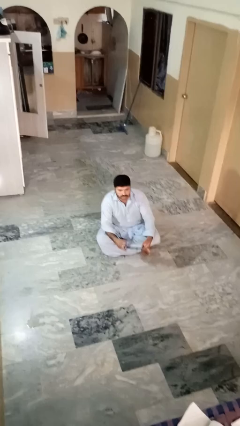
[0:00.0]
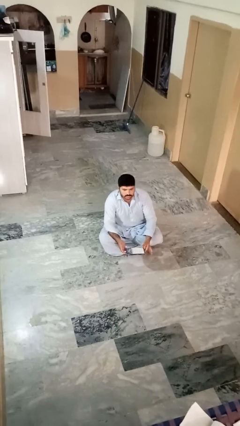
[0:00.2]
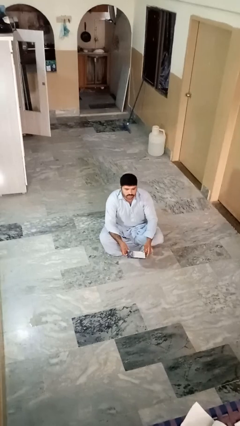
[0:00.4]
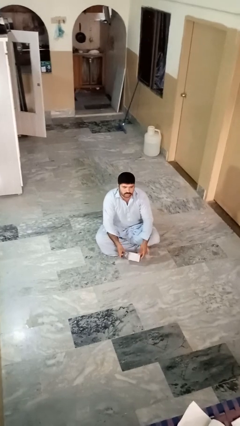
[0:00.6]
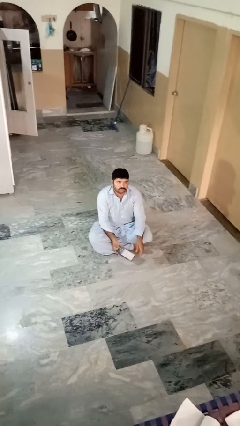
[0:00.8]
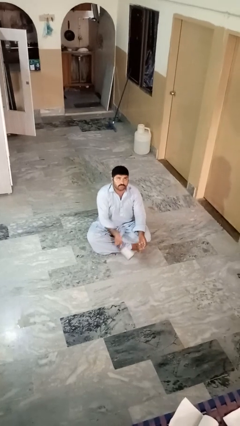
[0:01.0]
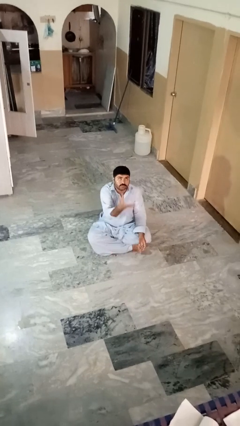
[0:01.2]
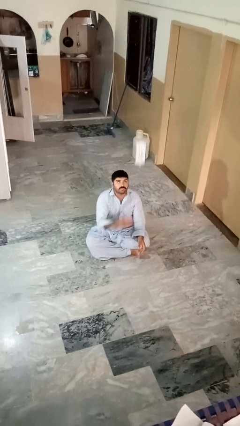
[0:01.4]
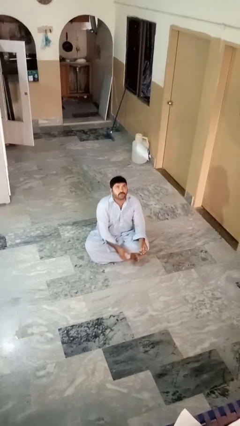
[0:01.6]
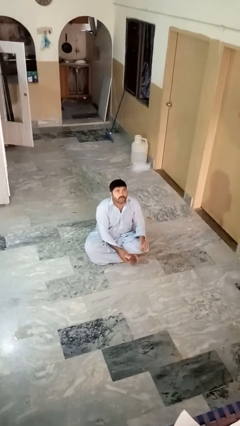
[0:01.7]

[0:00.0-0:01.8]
person drops object

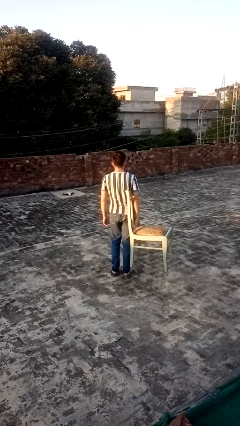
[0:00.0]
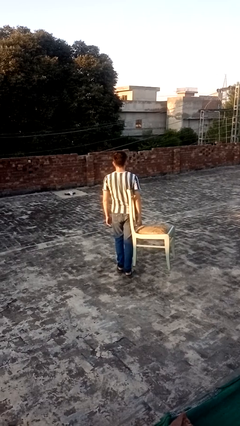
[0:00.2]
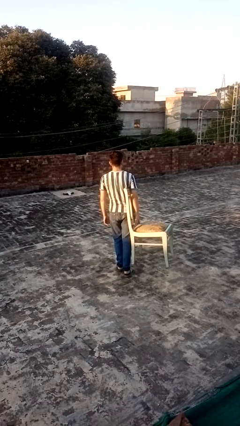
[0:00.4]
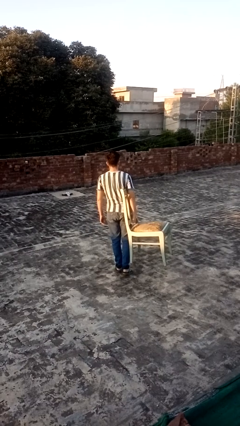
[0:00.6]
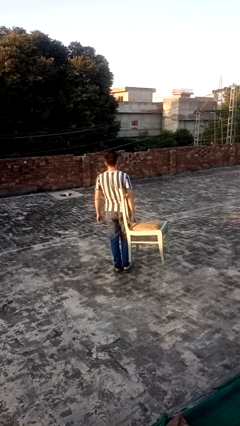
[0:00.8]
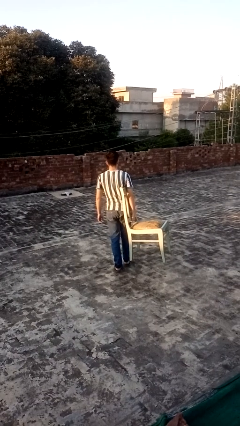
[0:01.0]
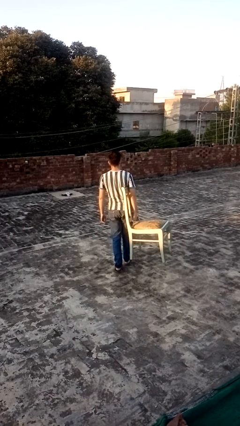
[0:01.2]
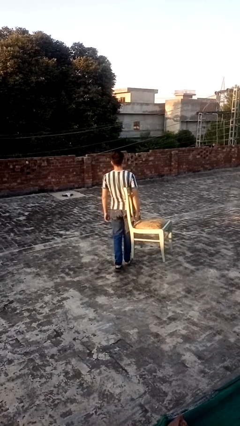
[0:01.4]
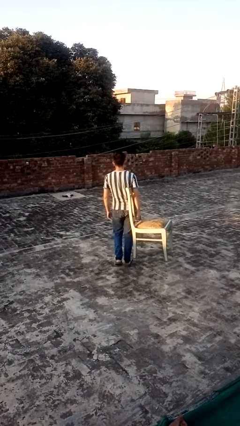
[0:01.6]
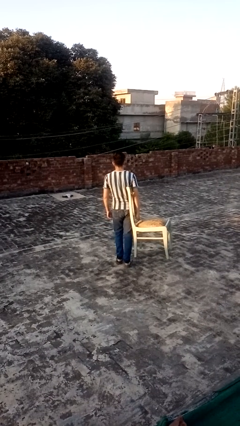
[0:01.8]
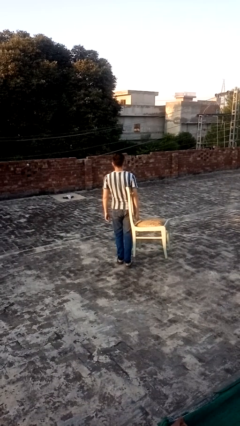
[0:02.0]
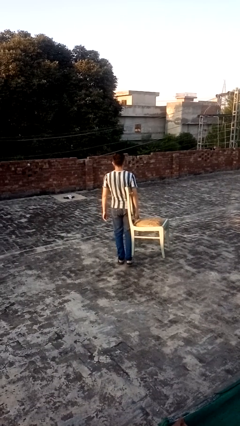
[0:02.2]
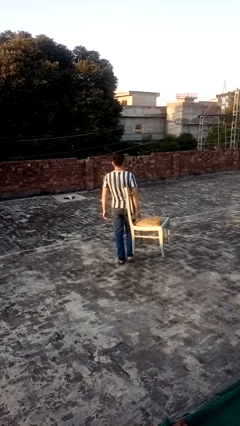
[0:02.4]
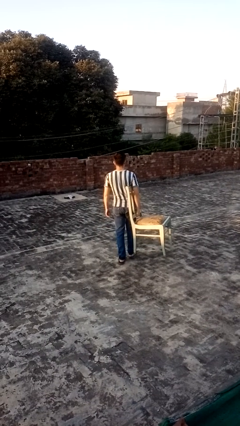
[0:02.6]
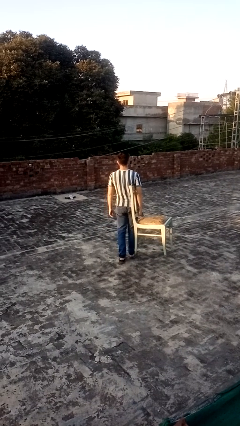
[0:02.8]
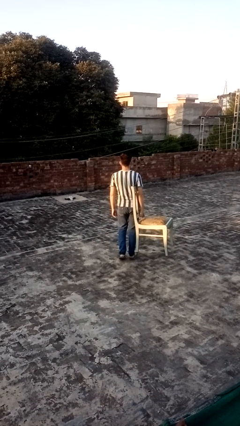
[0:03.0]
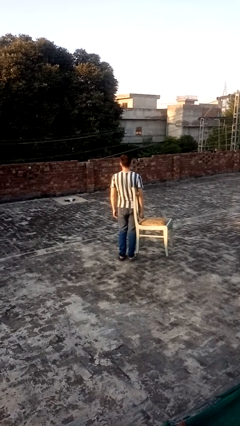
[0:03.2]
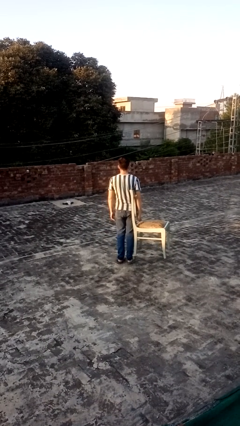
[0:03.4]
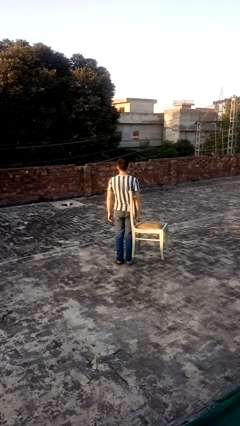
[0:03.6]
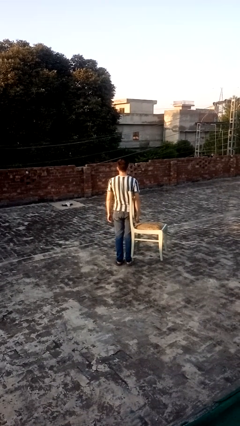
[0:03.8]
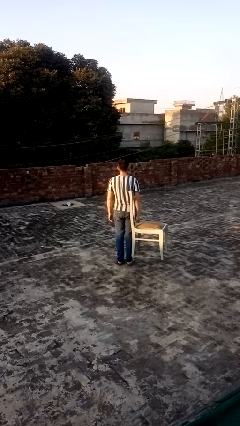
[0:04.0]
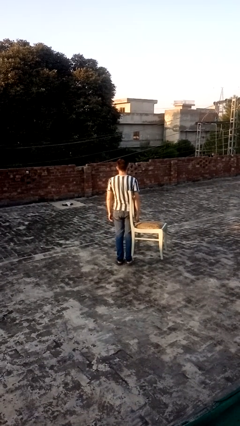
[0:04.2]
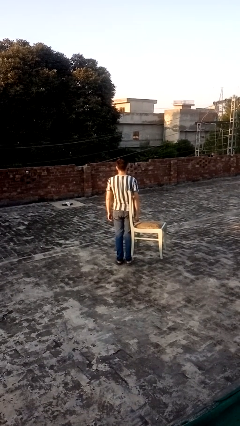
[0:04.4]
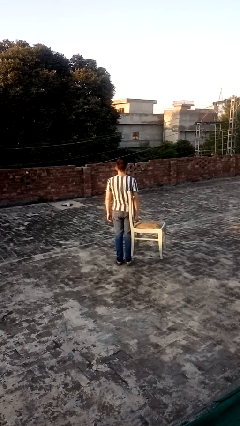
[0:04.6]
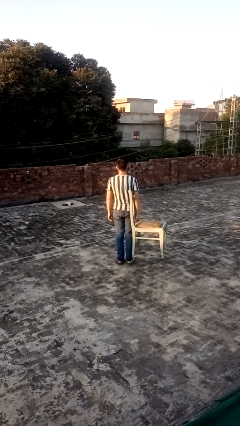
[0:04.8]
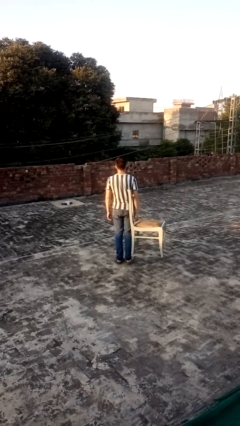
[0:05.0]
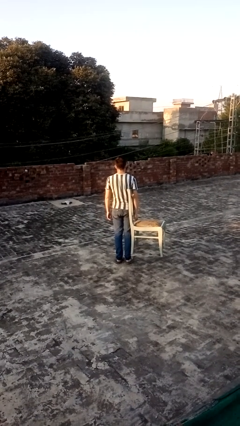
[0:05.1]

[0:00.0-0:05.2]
person carries furniture

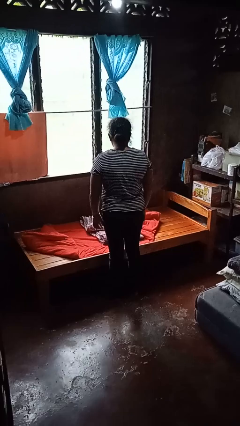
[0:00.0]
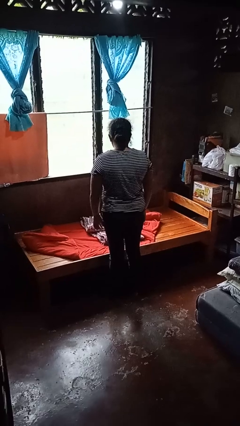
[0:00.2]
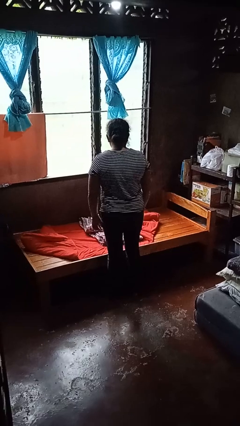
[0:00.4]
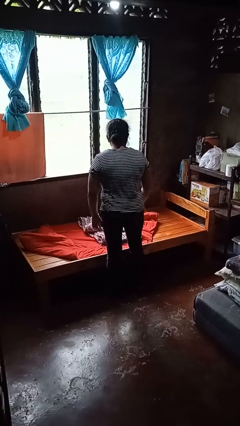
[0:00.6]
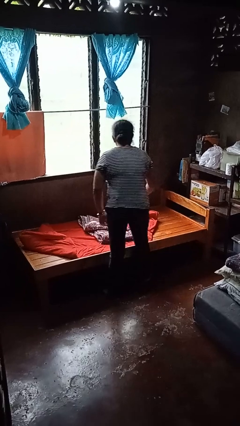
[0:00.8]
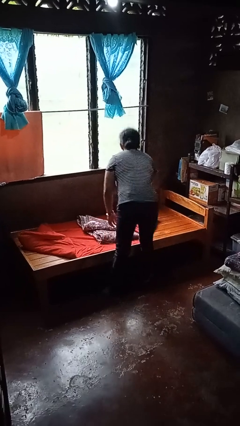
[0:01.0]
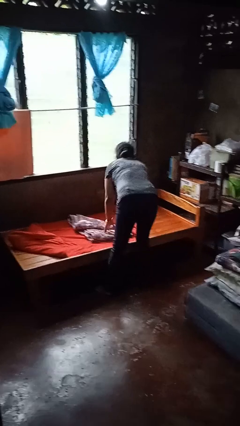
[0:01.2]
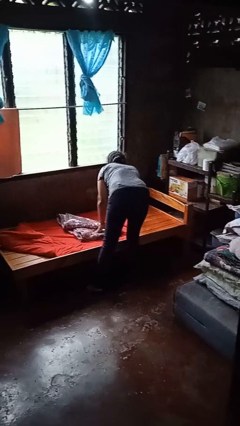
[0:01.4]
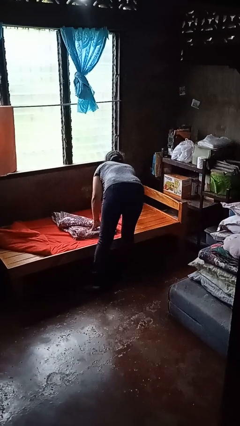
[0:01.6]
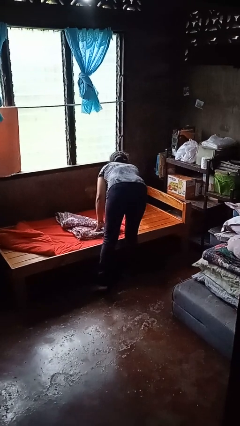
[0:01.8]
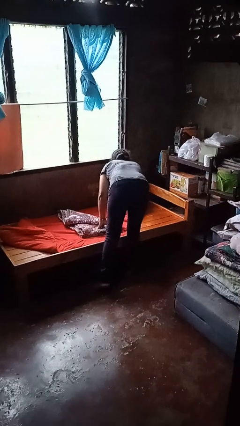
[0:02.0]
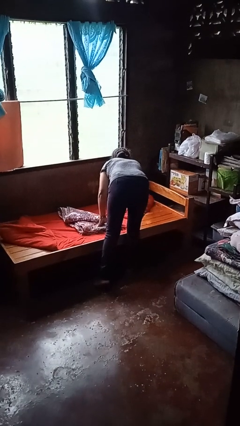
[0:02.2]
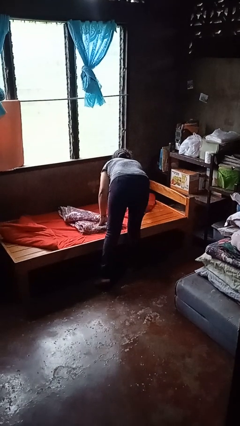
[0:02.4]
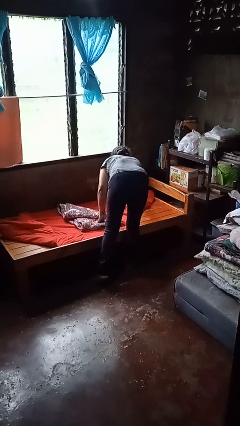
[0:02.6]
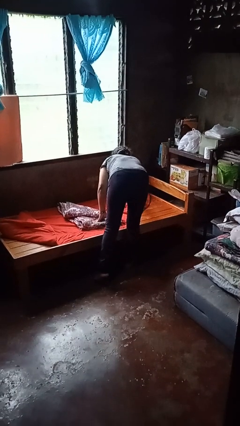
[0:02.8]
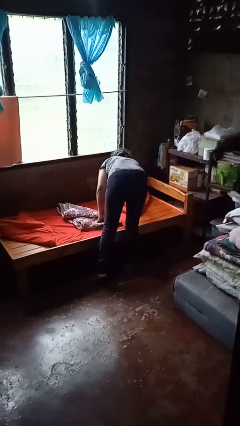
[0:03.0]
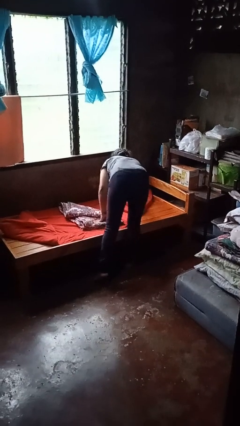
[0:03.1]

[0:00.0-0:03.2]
person makes bed

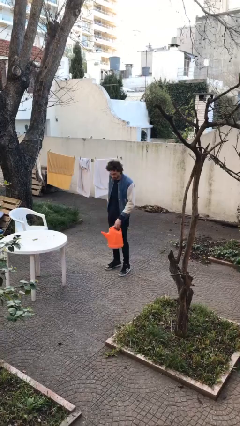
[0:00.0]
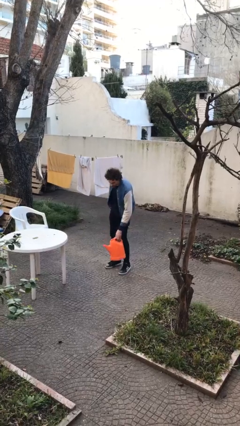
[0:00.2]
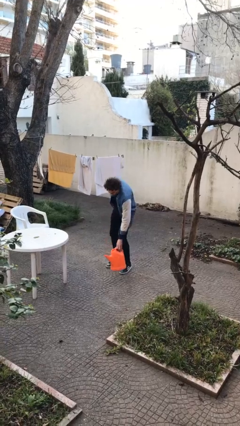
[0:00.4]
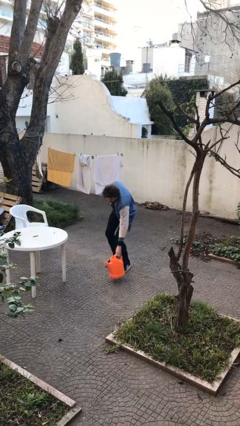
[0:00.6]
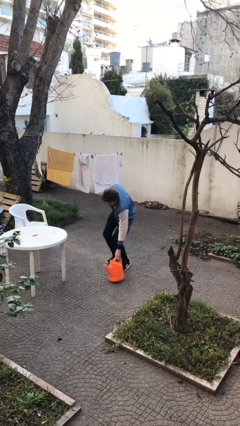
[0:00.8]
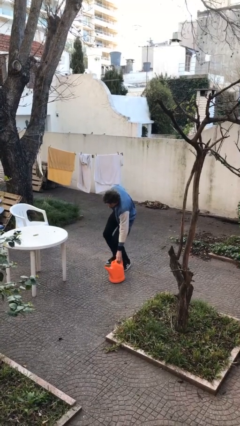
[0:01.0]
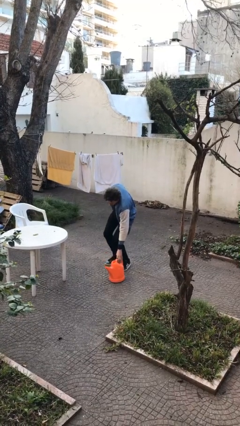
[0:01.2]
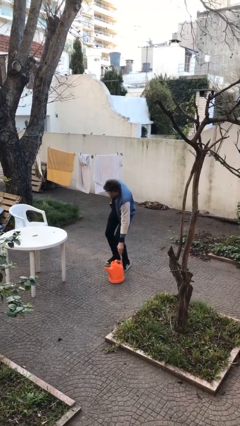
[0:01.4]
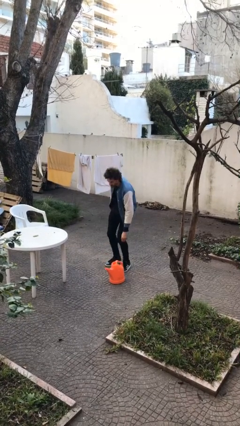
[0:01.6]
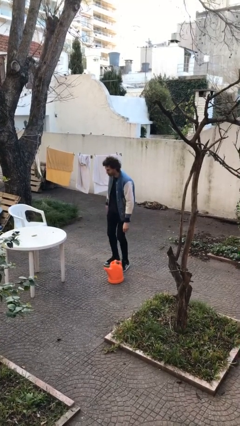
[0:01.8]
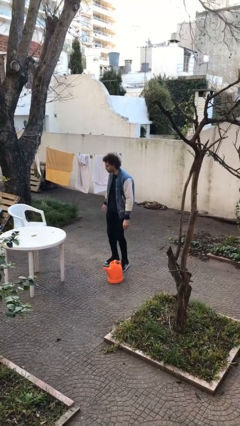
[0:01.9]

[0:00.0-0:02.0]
person puts down object on floor

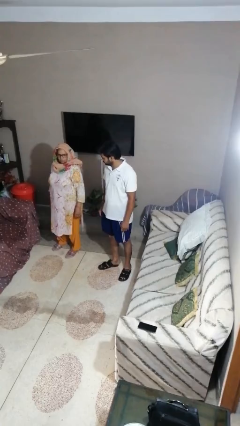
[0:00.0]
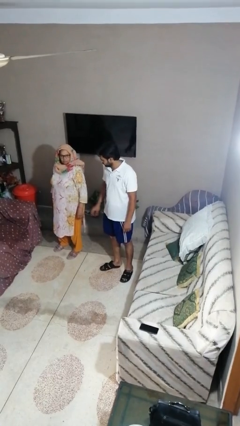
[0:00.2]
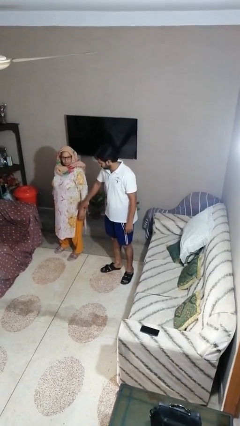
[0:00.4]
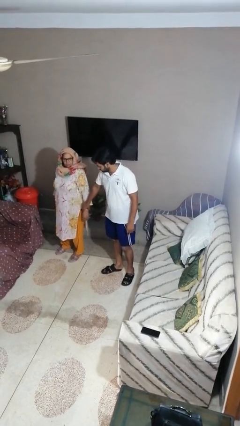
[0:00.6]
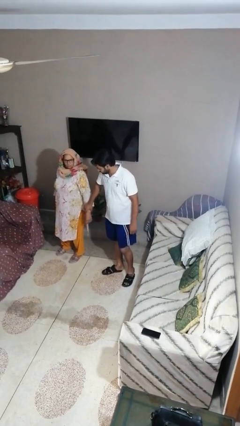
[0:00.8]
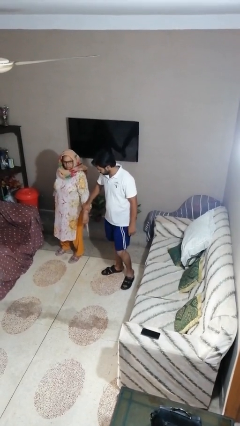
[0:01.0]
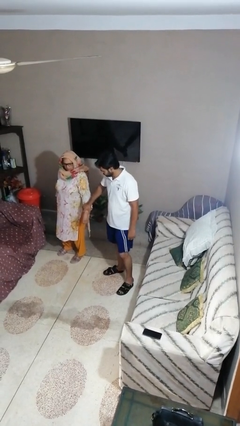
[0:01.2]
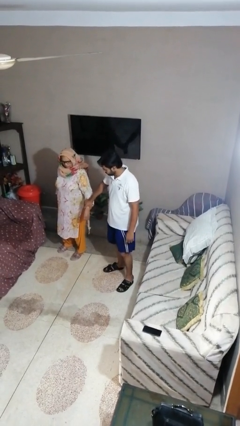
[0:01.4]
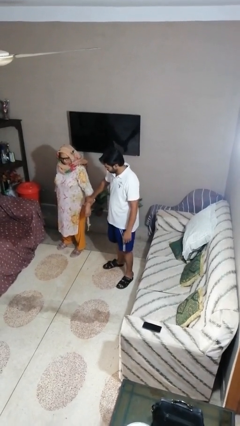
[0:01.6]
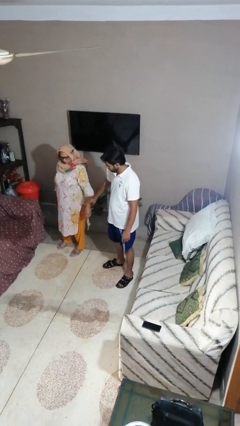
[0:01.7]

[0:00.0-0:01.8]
person grabs person by forearm

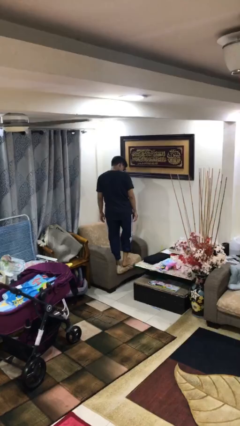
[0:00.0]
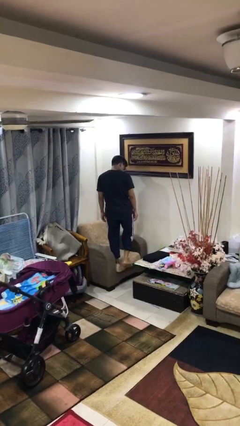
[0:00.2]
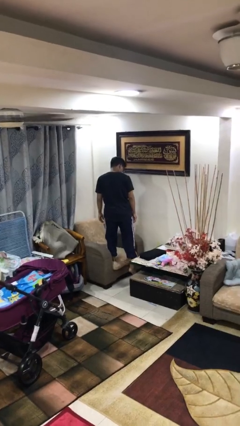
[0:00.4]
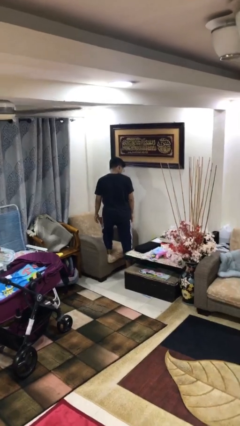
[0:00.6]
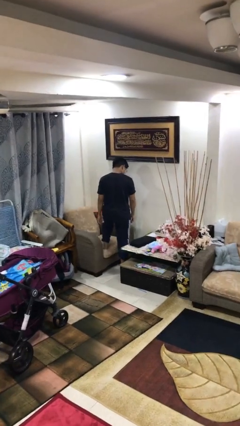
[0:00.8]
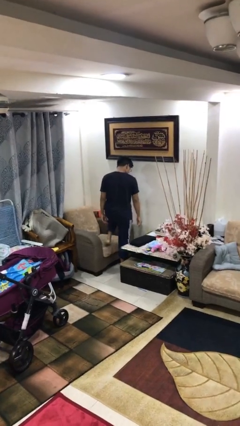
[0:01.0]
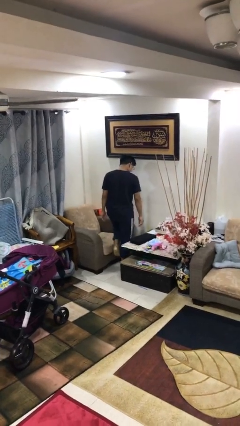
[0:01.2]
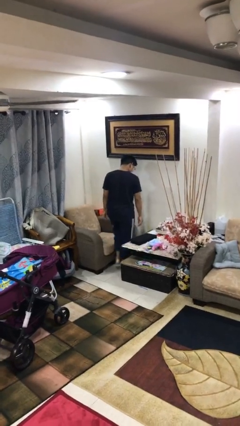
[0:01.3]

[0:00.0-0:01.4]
person climbs off couch

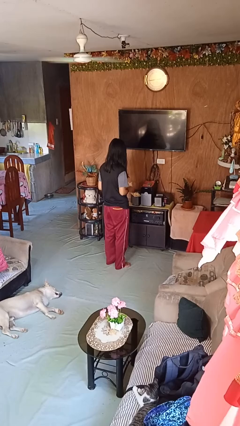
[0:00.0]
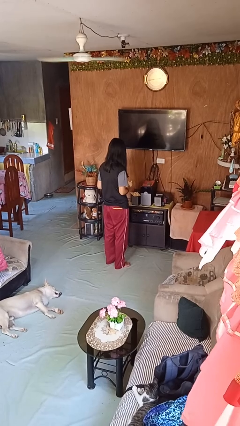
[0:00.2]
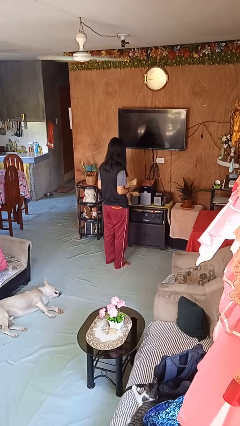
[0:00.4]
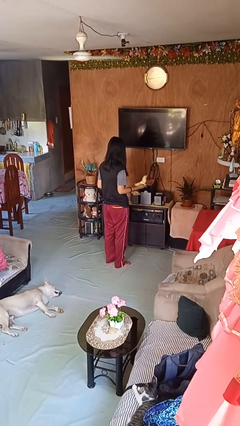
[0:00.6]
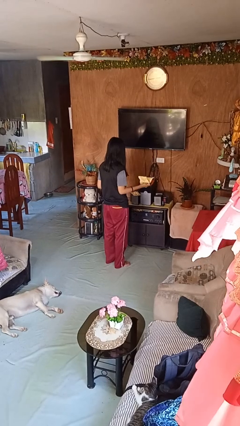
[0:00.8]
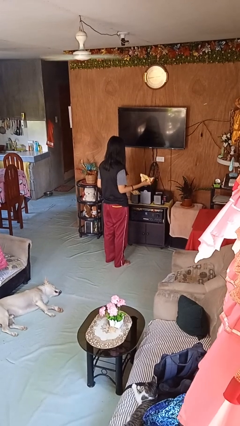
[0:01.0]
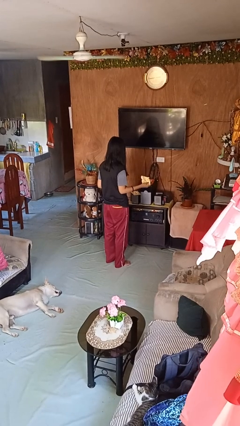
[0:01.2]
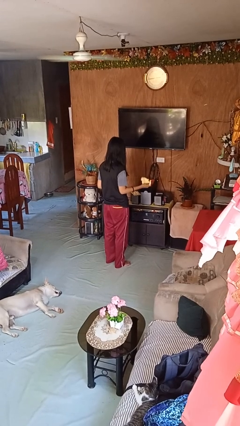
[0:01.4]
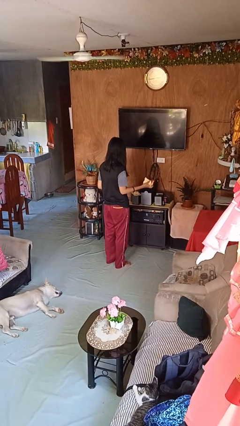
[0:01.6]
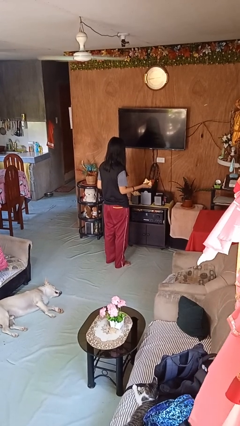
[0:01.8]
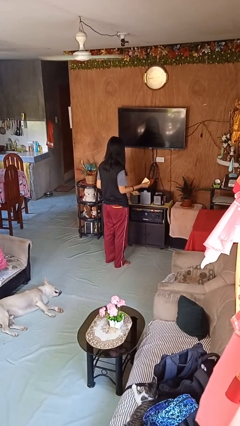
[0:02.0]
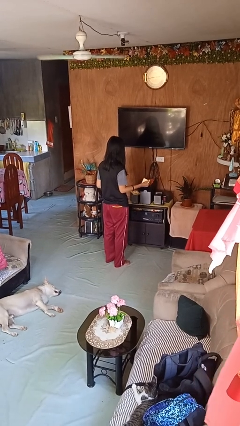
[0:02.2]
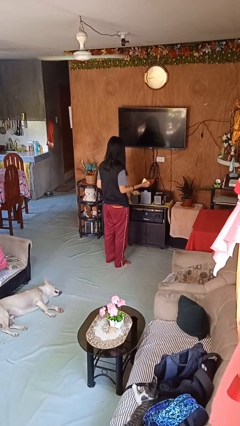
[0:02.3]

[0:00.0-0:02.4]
person crumples paper
